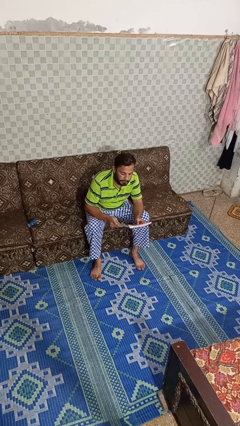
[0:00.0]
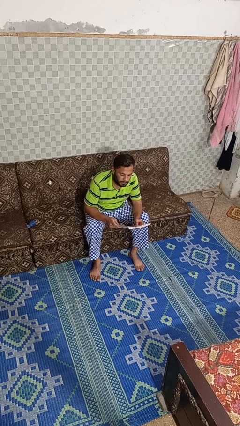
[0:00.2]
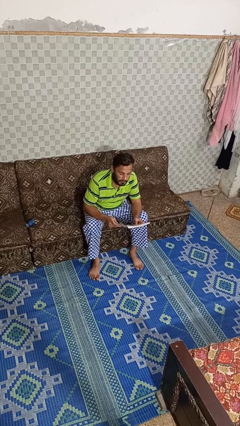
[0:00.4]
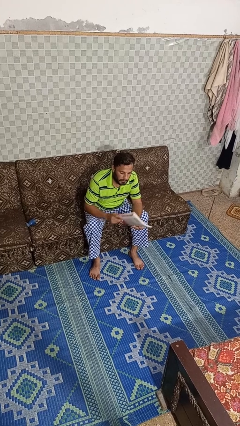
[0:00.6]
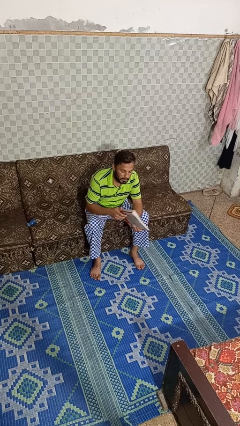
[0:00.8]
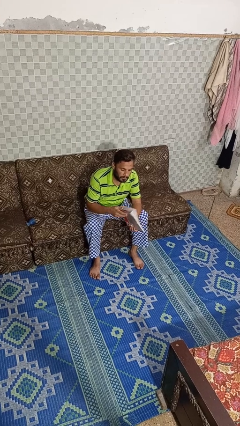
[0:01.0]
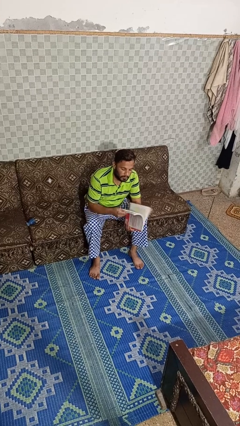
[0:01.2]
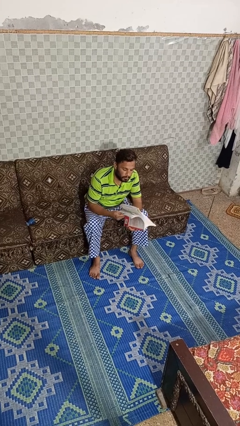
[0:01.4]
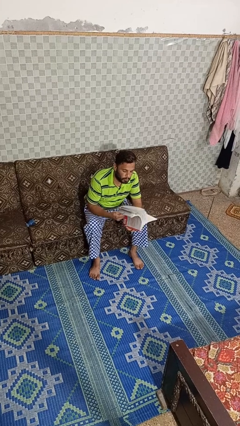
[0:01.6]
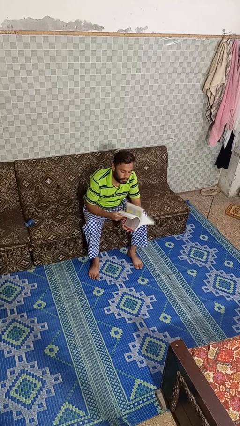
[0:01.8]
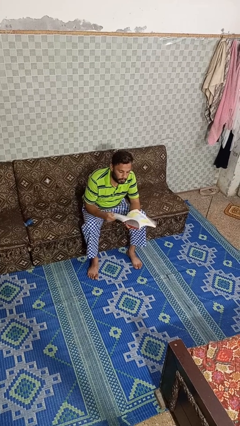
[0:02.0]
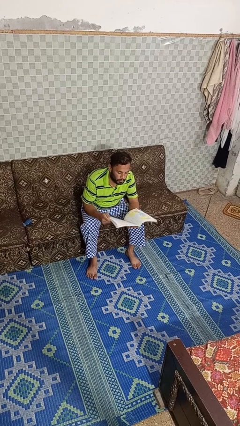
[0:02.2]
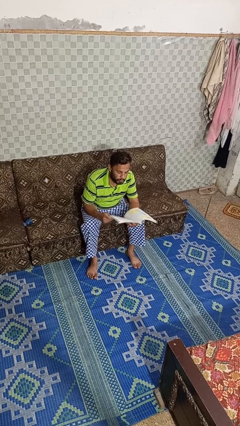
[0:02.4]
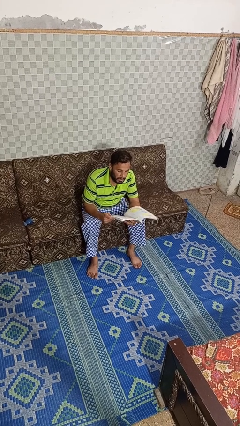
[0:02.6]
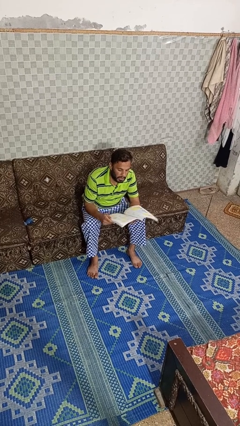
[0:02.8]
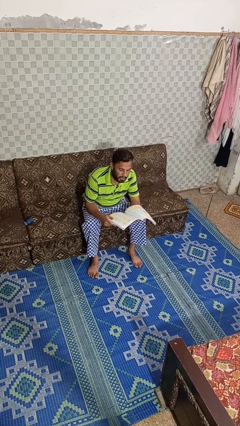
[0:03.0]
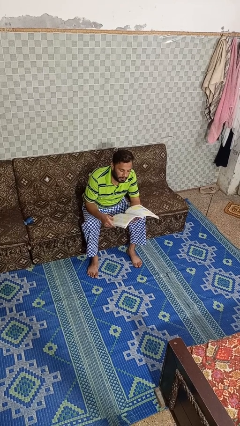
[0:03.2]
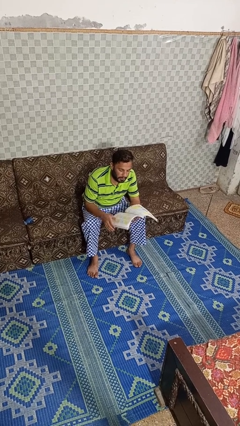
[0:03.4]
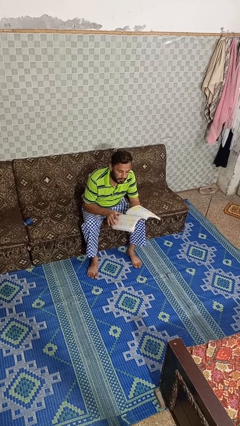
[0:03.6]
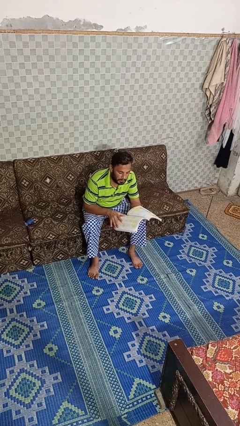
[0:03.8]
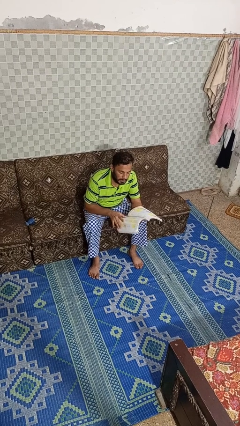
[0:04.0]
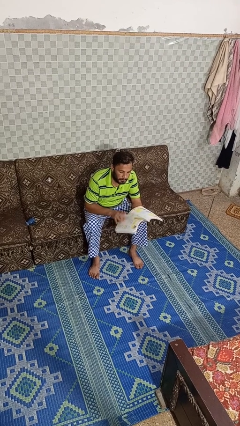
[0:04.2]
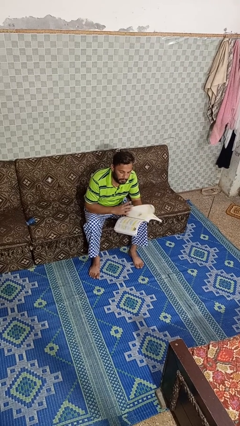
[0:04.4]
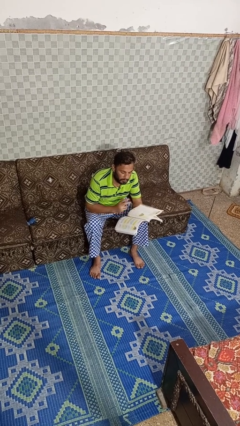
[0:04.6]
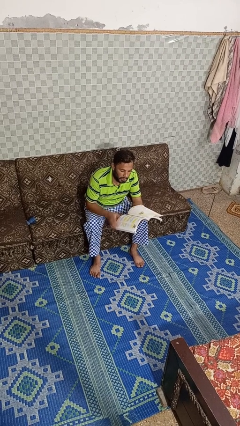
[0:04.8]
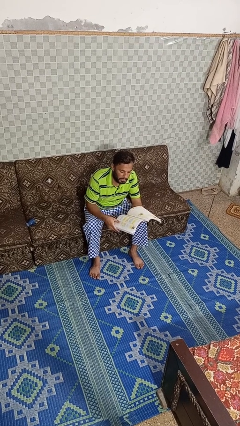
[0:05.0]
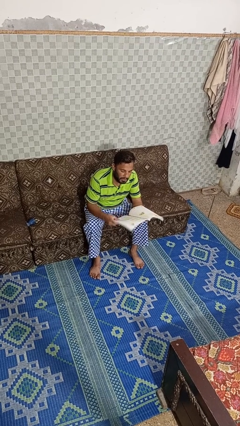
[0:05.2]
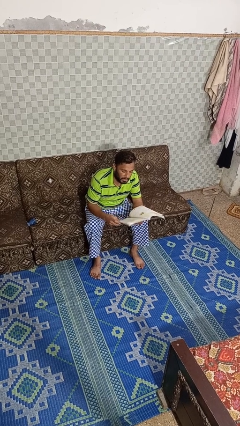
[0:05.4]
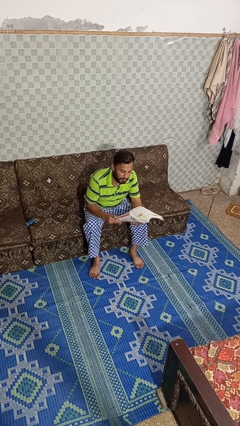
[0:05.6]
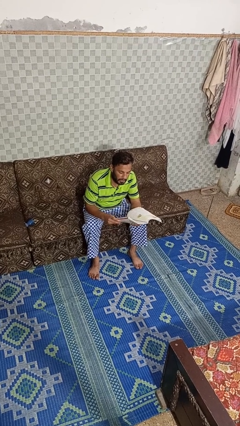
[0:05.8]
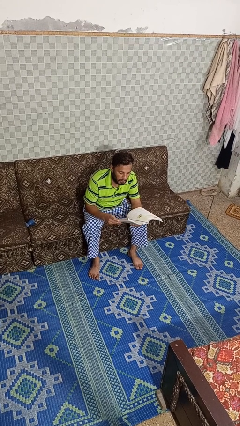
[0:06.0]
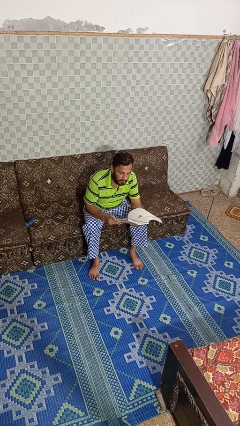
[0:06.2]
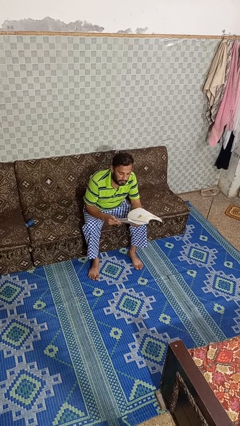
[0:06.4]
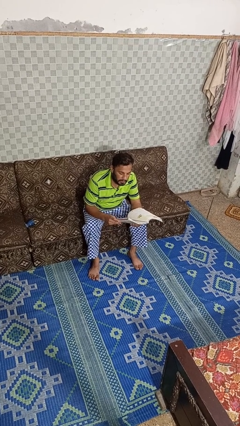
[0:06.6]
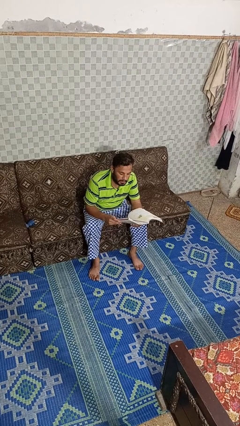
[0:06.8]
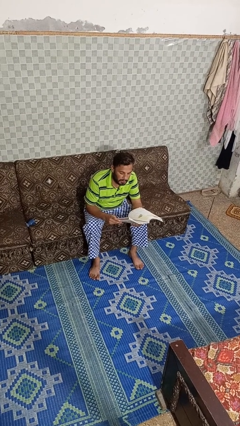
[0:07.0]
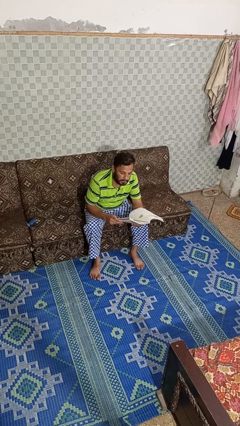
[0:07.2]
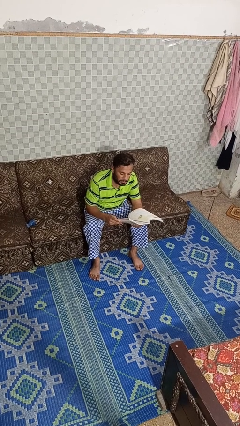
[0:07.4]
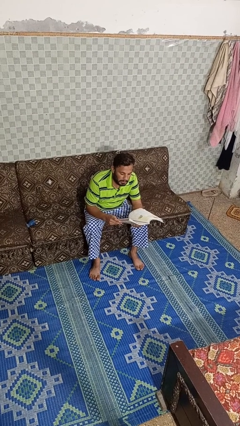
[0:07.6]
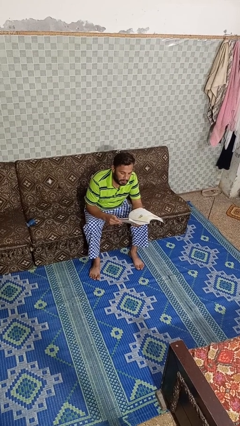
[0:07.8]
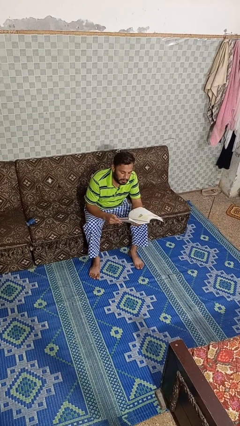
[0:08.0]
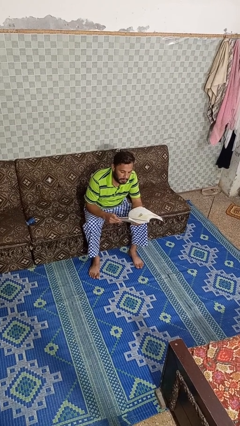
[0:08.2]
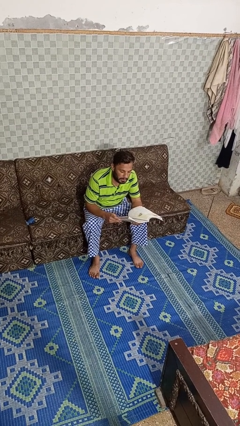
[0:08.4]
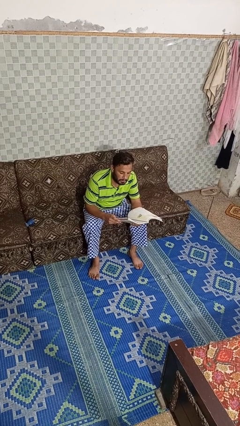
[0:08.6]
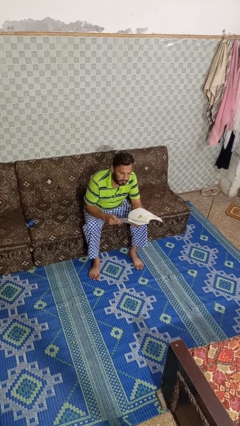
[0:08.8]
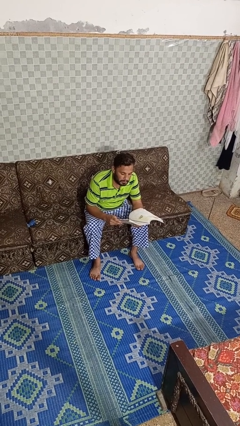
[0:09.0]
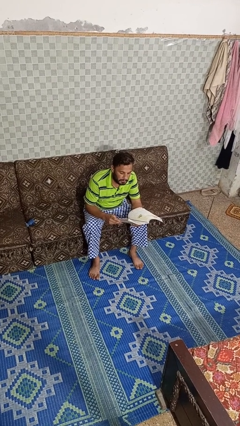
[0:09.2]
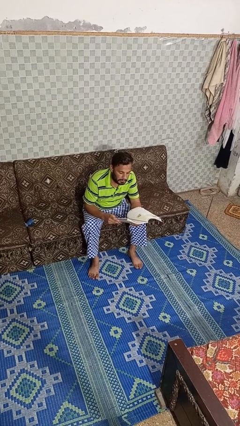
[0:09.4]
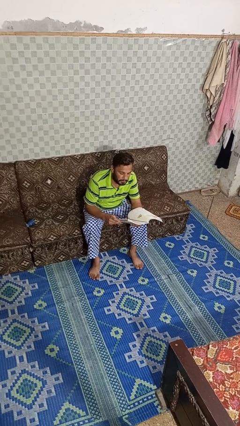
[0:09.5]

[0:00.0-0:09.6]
person reads book

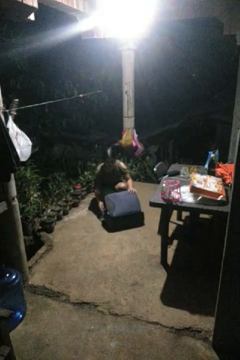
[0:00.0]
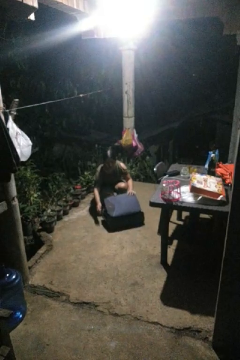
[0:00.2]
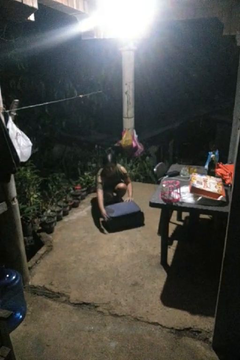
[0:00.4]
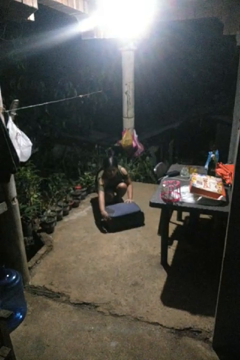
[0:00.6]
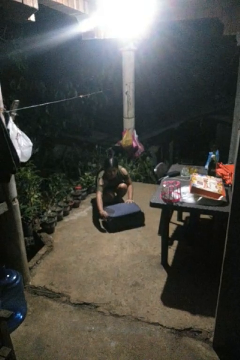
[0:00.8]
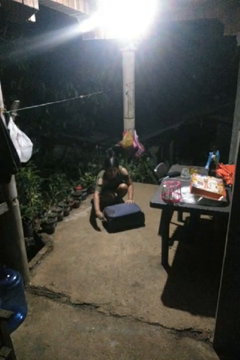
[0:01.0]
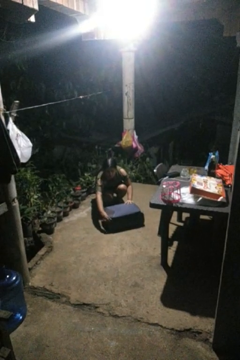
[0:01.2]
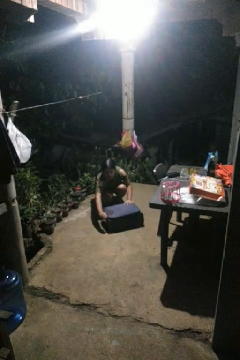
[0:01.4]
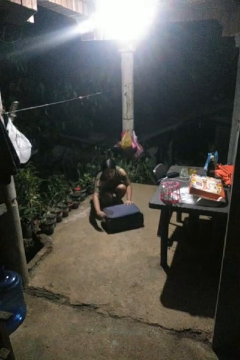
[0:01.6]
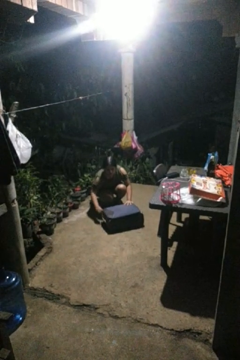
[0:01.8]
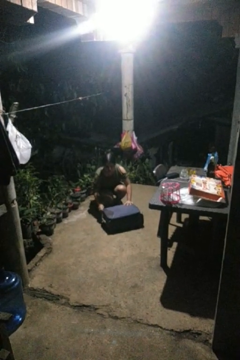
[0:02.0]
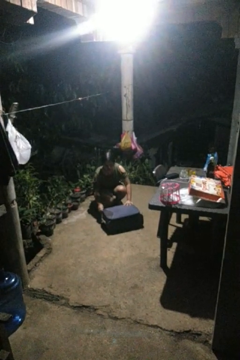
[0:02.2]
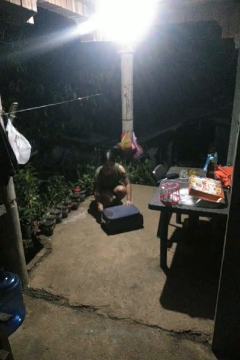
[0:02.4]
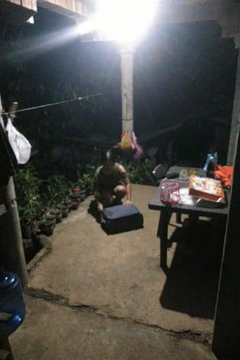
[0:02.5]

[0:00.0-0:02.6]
person closes suitcase

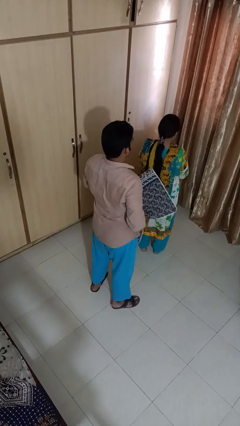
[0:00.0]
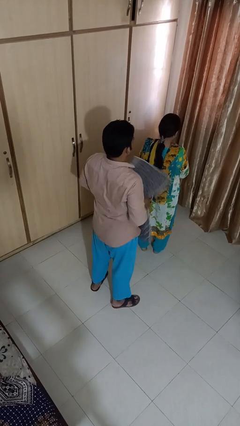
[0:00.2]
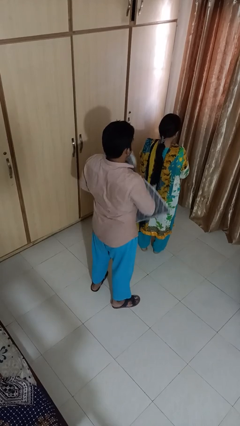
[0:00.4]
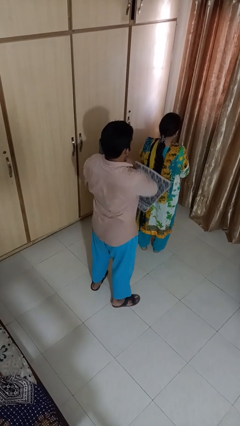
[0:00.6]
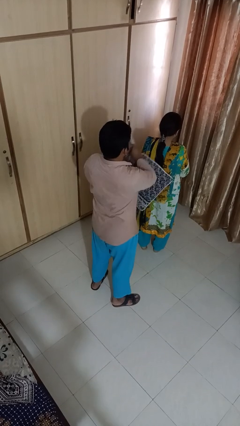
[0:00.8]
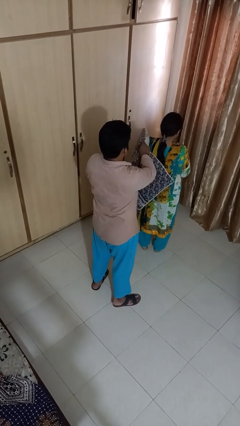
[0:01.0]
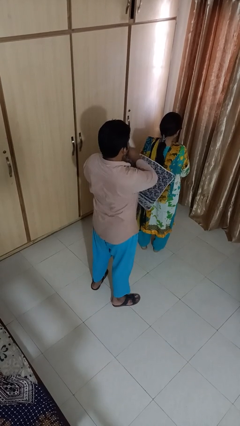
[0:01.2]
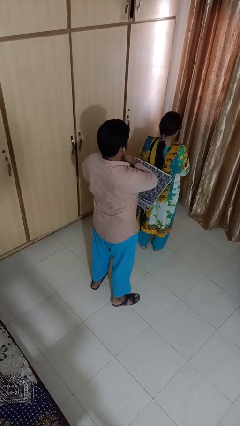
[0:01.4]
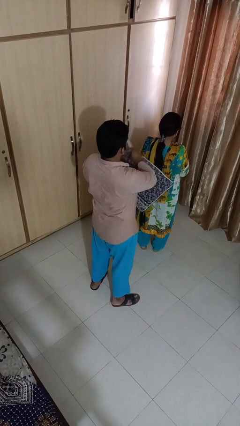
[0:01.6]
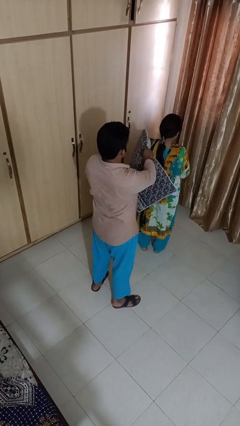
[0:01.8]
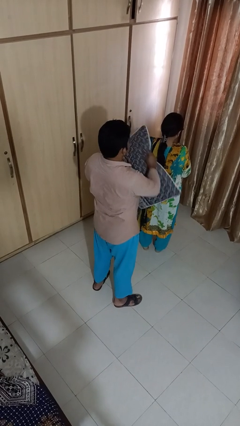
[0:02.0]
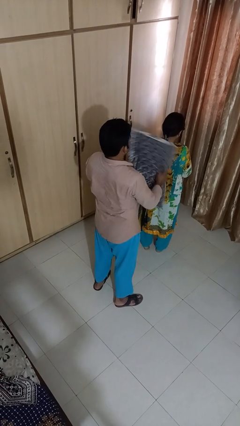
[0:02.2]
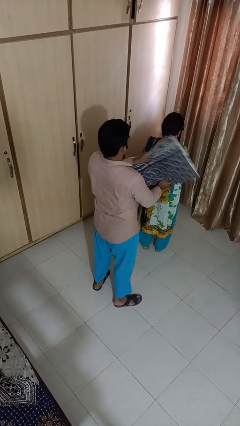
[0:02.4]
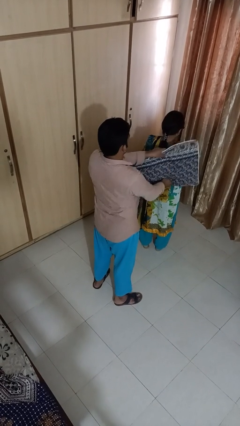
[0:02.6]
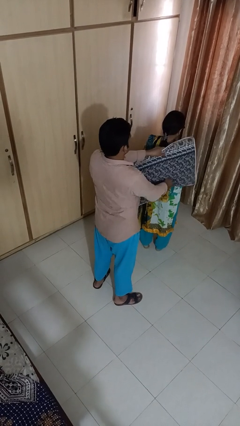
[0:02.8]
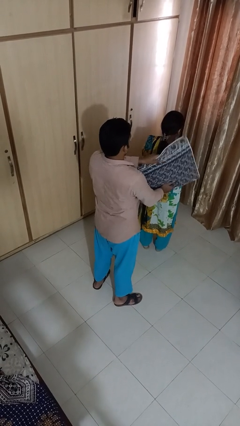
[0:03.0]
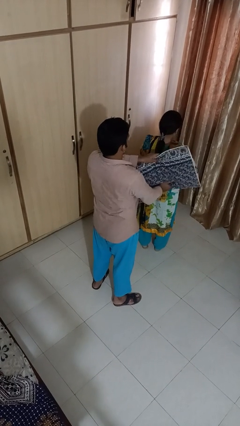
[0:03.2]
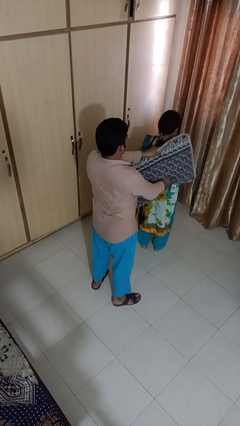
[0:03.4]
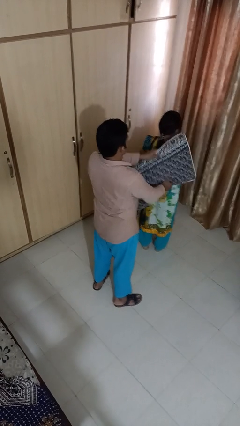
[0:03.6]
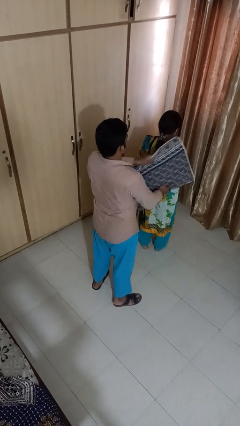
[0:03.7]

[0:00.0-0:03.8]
person hits person with pillow

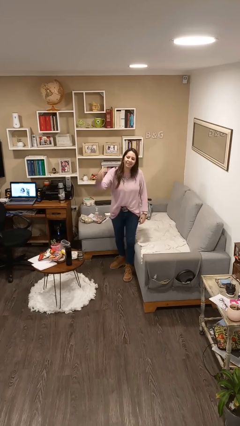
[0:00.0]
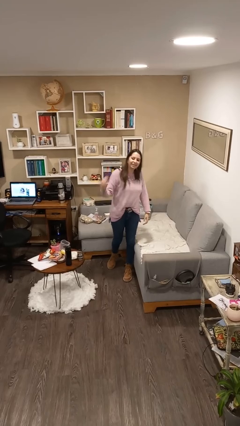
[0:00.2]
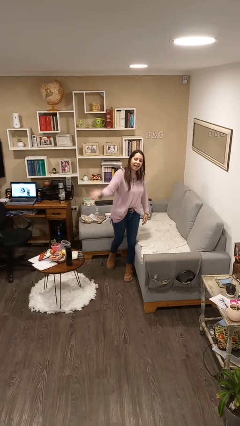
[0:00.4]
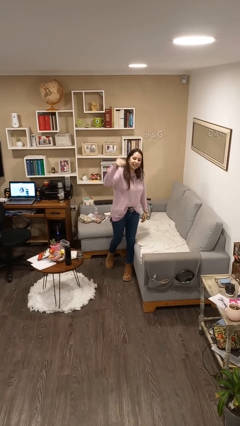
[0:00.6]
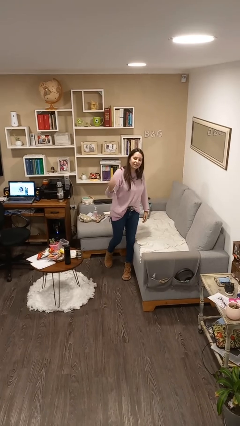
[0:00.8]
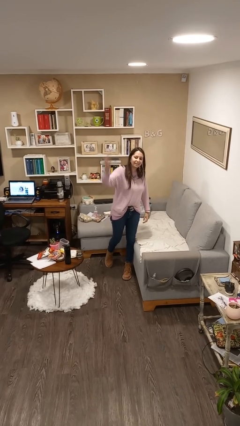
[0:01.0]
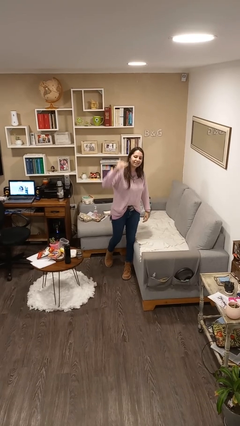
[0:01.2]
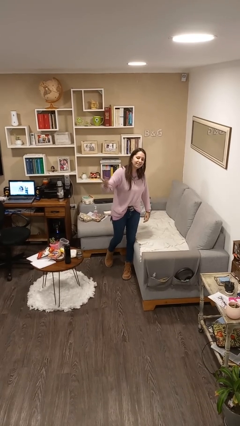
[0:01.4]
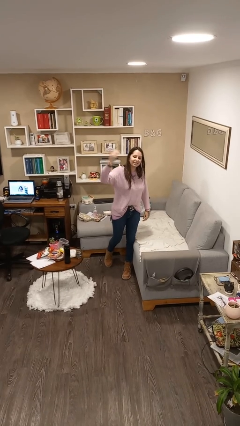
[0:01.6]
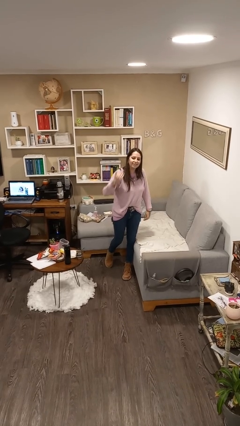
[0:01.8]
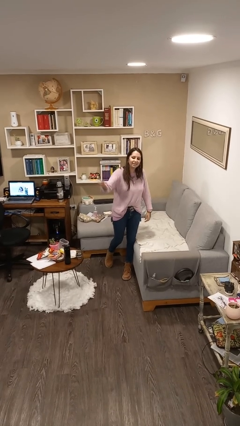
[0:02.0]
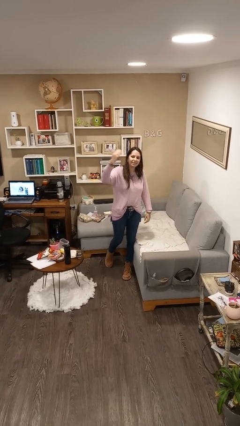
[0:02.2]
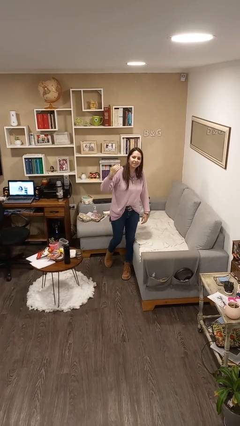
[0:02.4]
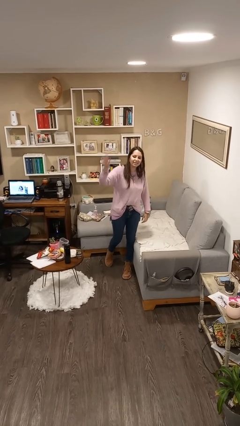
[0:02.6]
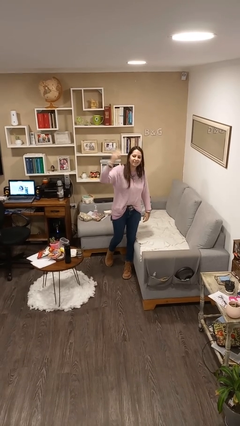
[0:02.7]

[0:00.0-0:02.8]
person gestures come here
